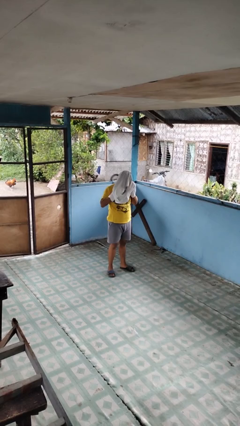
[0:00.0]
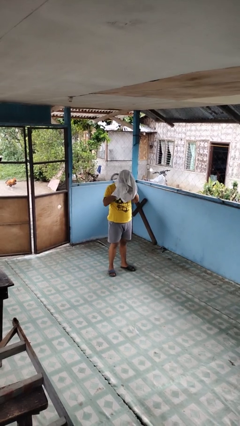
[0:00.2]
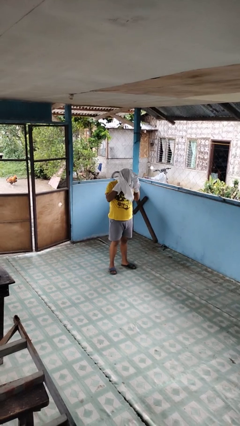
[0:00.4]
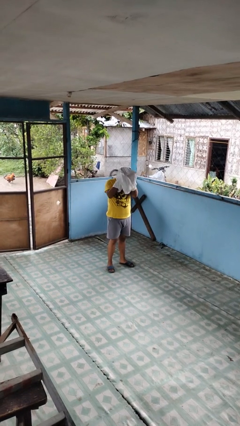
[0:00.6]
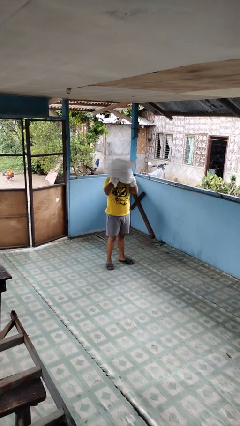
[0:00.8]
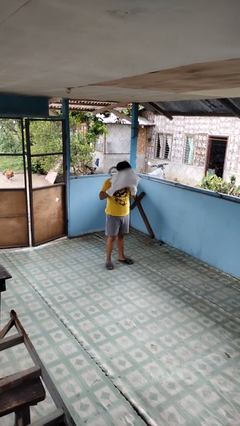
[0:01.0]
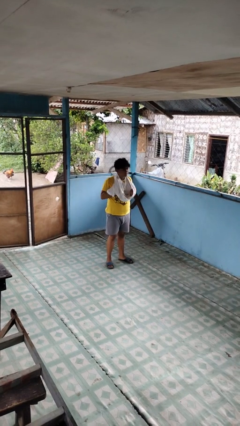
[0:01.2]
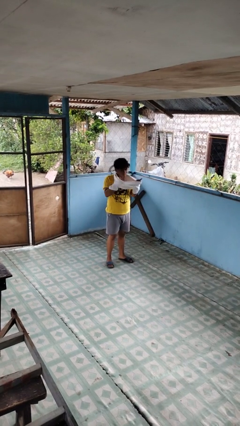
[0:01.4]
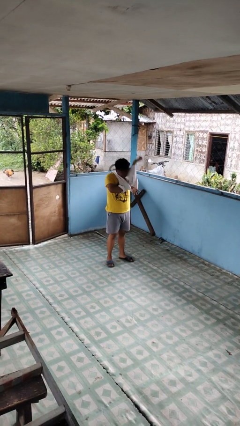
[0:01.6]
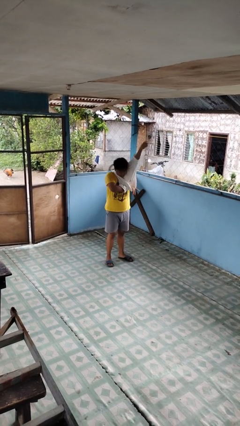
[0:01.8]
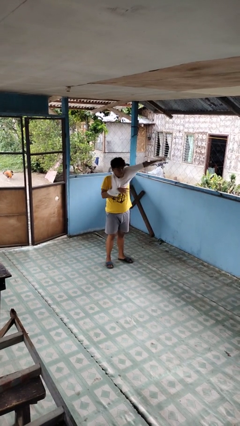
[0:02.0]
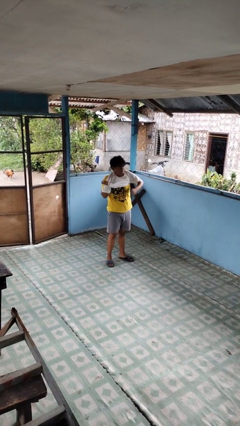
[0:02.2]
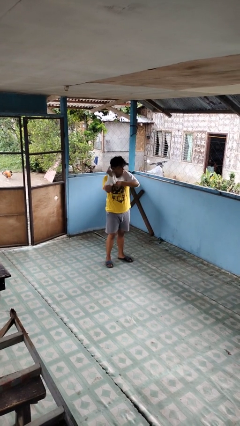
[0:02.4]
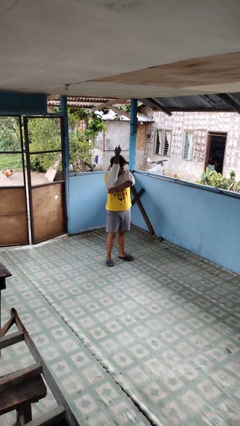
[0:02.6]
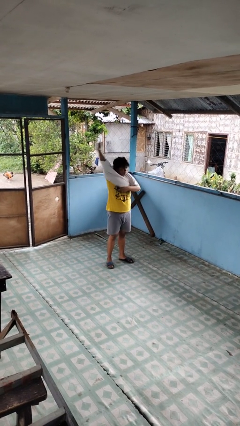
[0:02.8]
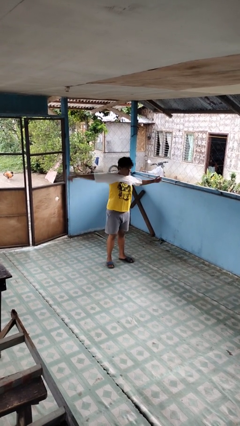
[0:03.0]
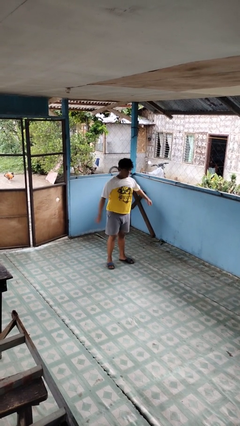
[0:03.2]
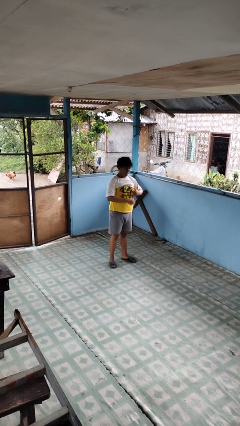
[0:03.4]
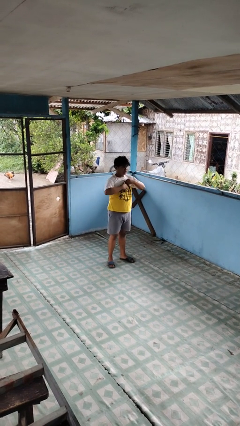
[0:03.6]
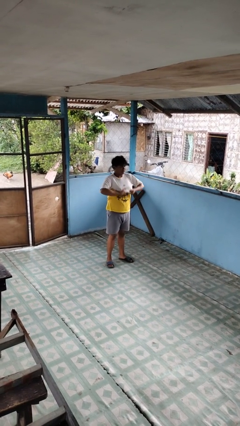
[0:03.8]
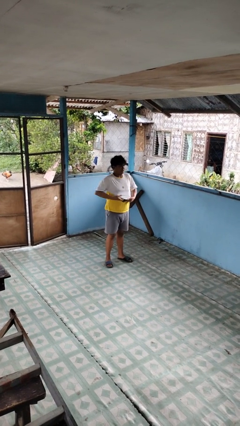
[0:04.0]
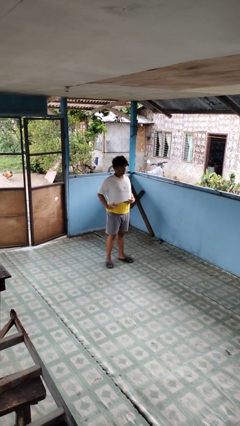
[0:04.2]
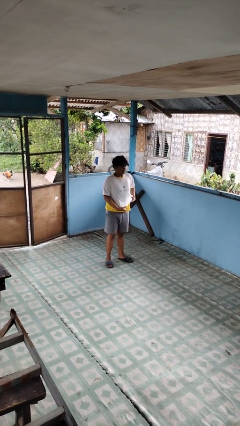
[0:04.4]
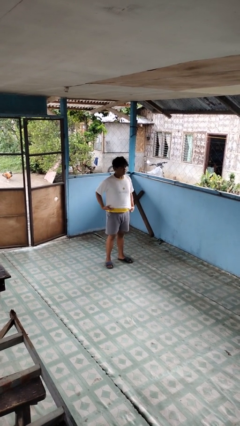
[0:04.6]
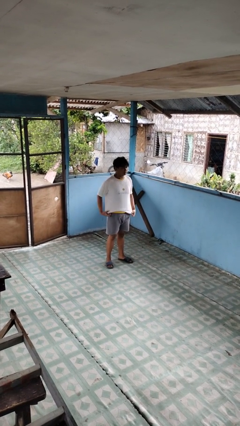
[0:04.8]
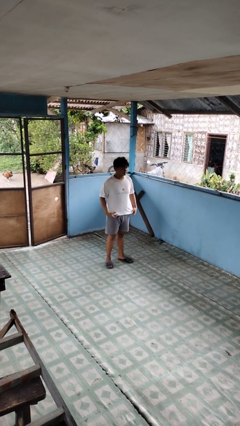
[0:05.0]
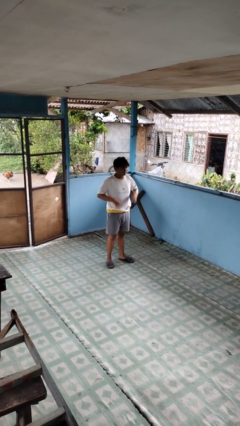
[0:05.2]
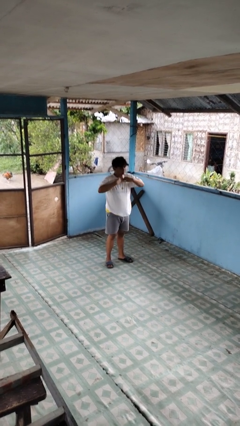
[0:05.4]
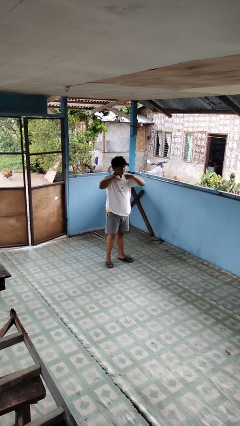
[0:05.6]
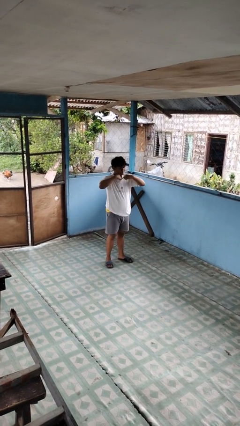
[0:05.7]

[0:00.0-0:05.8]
person puts on shirt

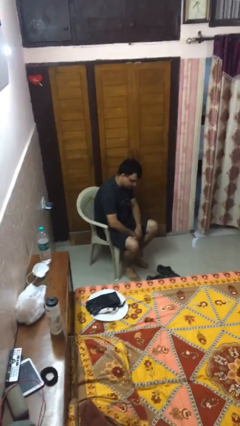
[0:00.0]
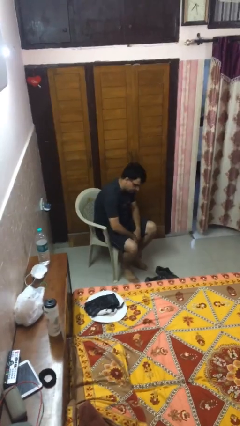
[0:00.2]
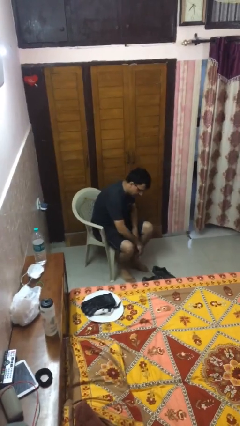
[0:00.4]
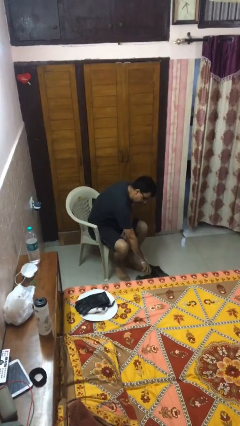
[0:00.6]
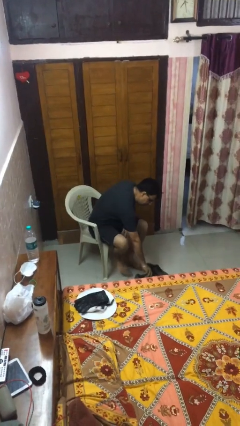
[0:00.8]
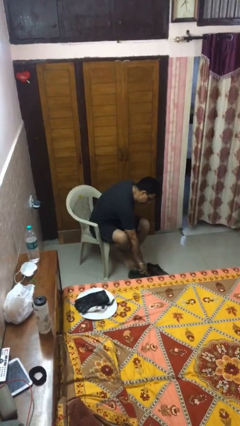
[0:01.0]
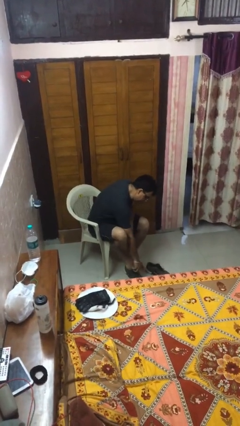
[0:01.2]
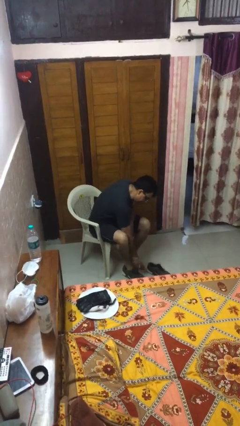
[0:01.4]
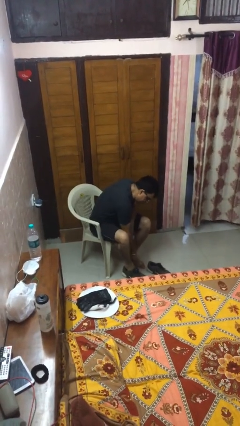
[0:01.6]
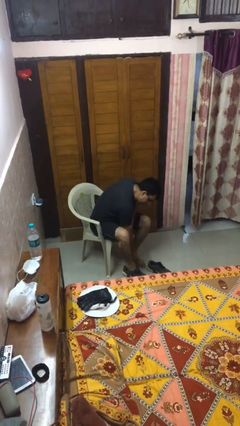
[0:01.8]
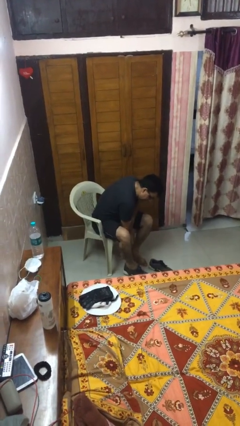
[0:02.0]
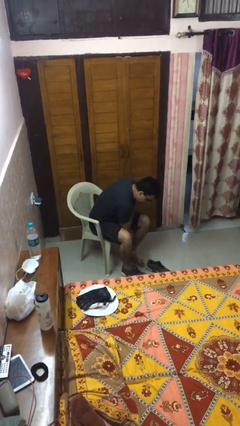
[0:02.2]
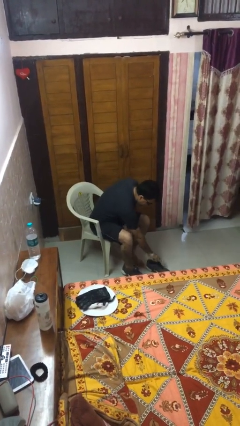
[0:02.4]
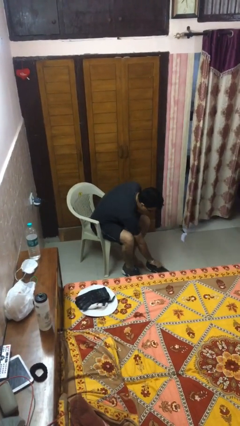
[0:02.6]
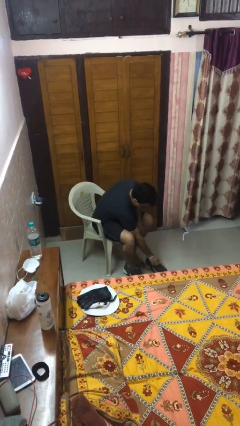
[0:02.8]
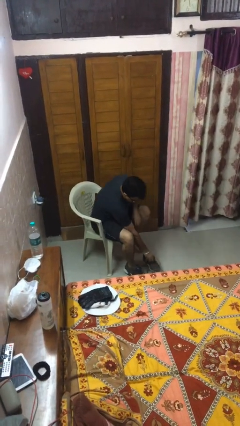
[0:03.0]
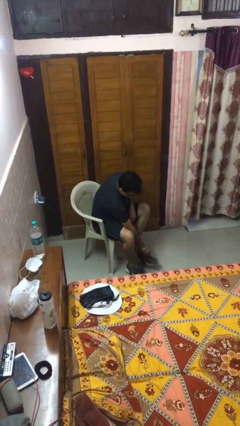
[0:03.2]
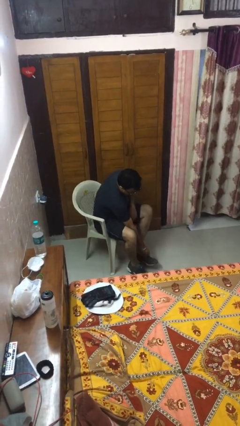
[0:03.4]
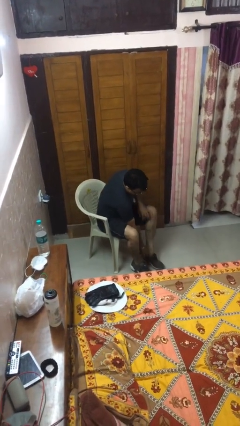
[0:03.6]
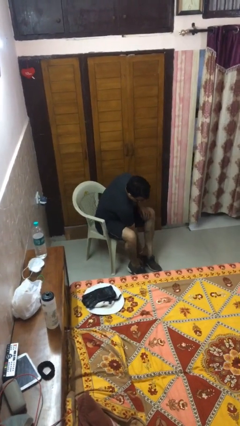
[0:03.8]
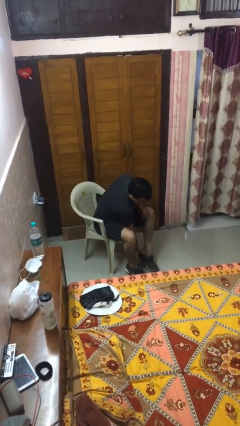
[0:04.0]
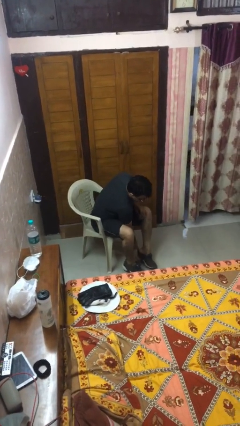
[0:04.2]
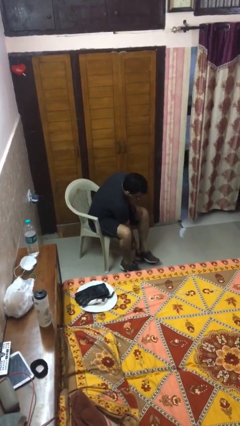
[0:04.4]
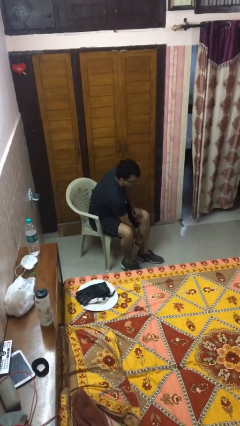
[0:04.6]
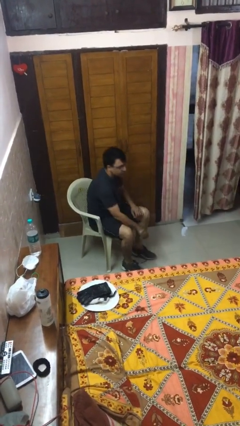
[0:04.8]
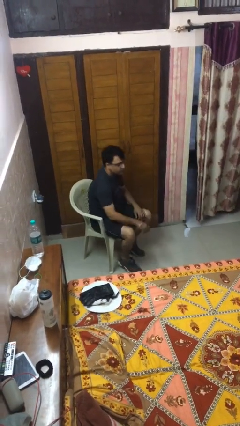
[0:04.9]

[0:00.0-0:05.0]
person puts on shoes

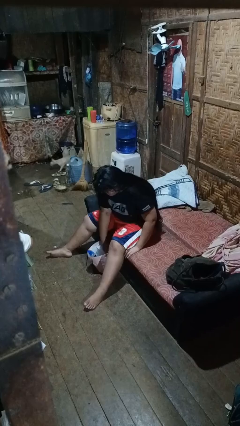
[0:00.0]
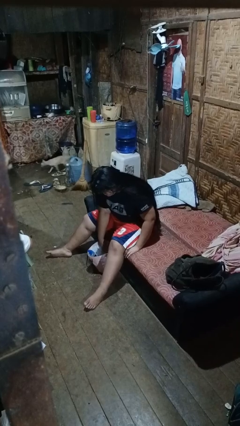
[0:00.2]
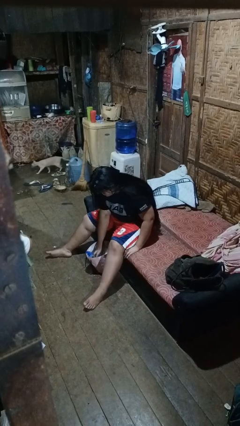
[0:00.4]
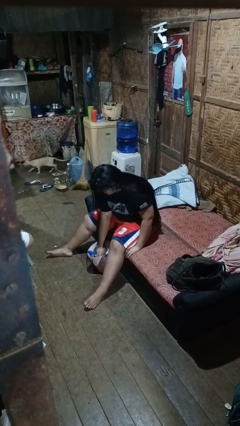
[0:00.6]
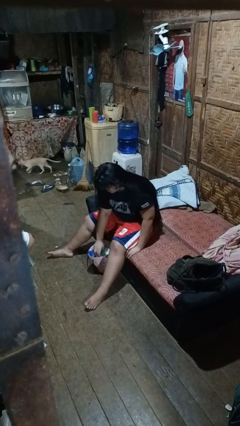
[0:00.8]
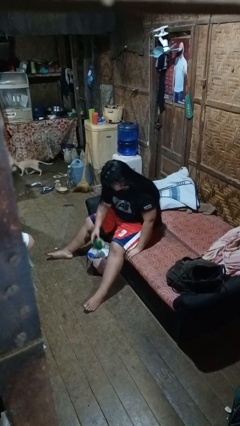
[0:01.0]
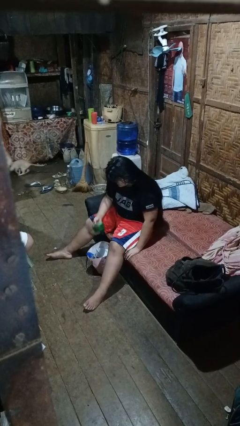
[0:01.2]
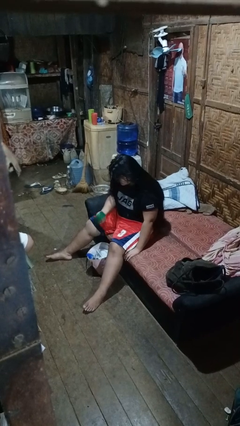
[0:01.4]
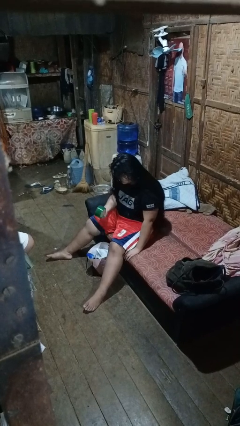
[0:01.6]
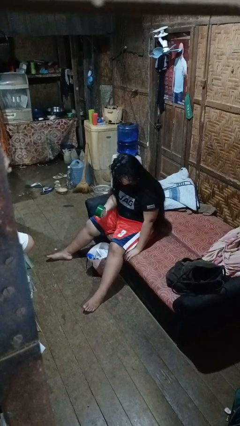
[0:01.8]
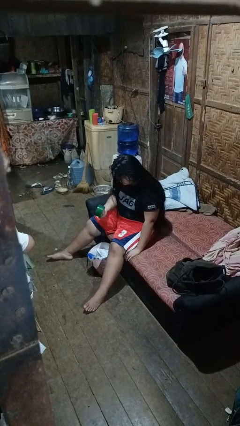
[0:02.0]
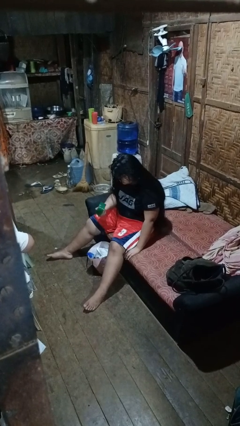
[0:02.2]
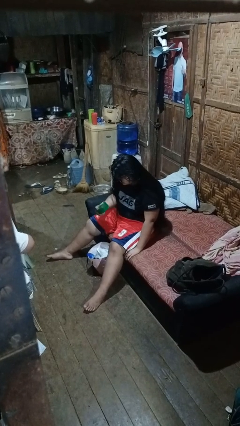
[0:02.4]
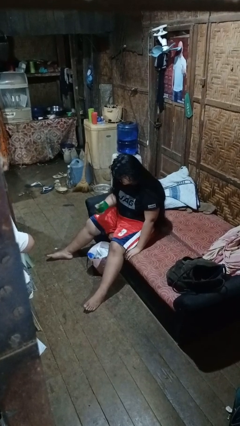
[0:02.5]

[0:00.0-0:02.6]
person takes object from bag

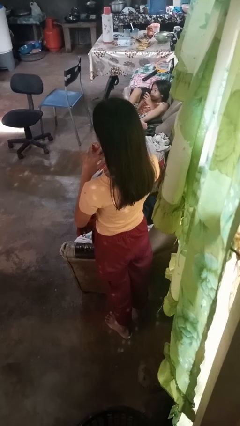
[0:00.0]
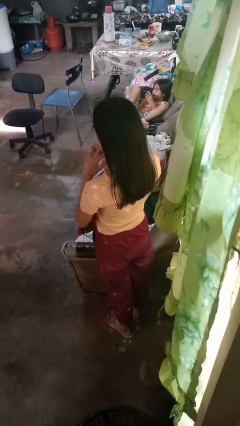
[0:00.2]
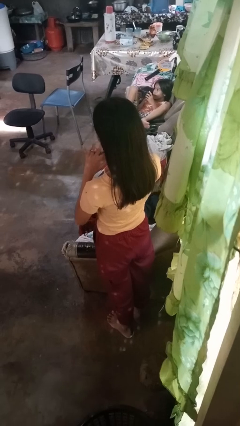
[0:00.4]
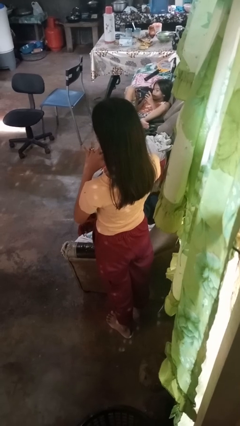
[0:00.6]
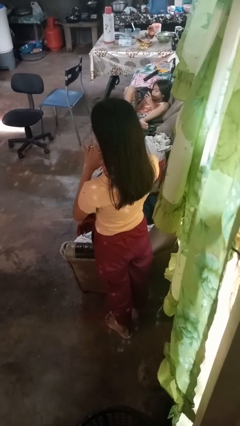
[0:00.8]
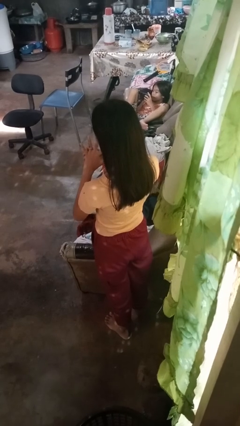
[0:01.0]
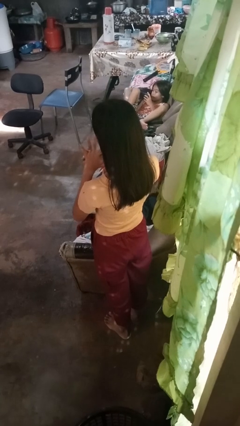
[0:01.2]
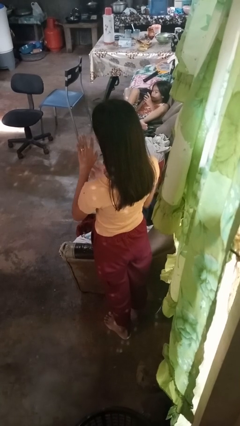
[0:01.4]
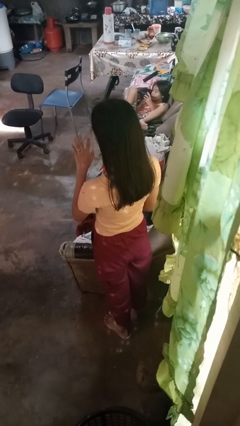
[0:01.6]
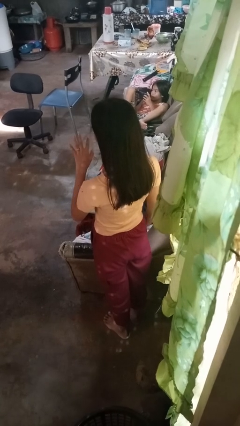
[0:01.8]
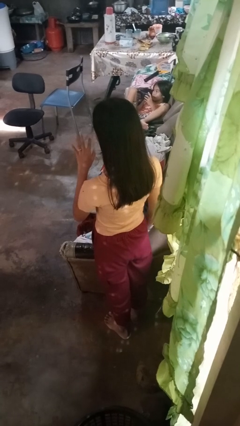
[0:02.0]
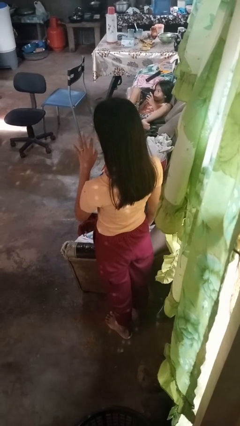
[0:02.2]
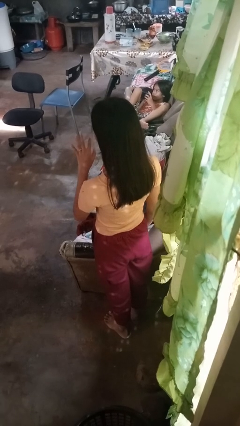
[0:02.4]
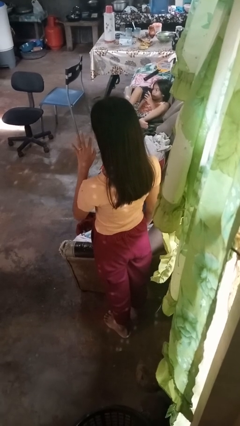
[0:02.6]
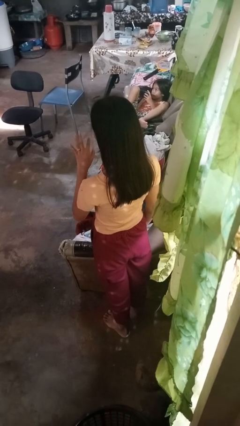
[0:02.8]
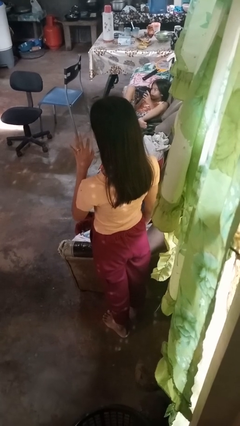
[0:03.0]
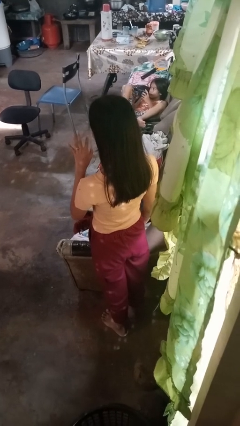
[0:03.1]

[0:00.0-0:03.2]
person puts on ring

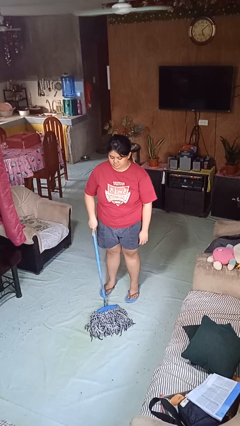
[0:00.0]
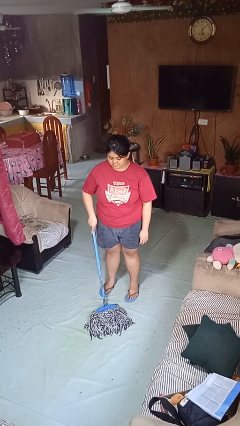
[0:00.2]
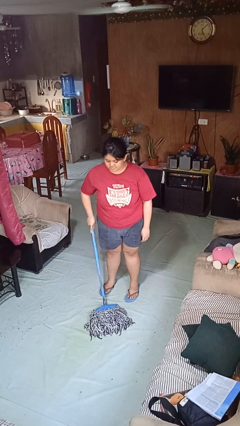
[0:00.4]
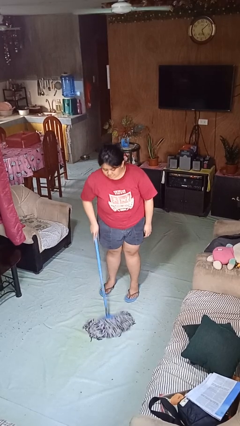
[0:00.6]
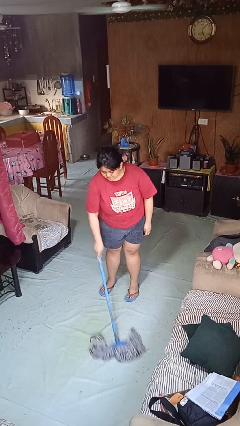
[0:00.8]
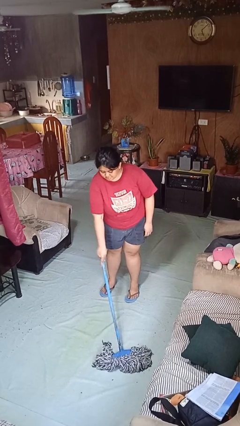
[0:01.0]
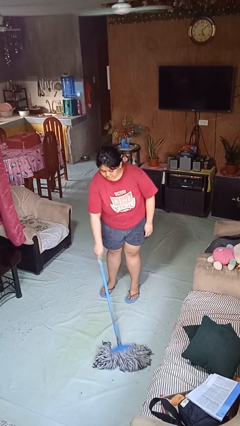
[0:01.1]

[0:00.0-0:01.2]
person mops
